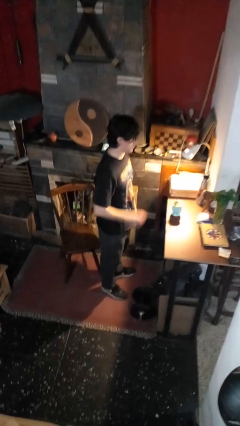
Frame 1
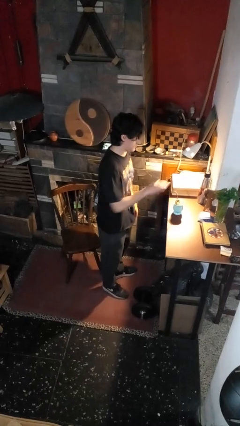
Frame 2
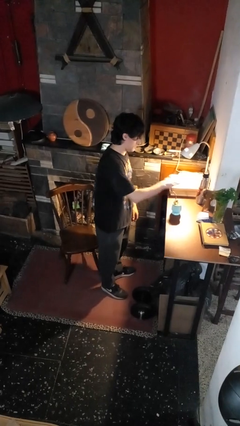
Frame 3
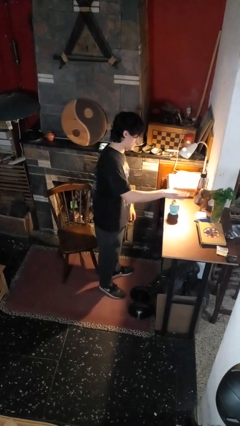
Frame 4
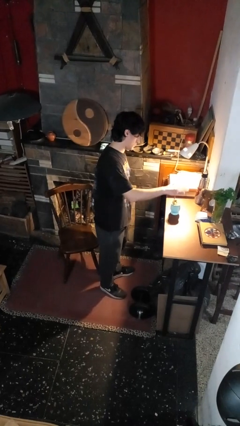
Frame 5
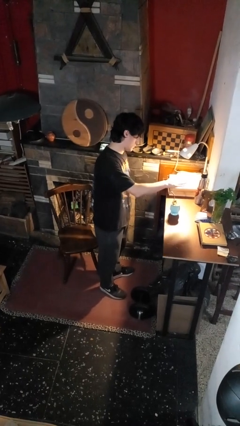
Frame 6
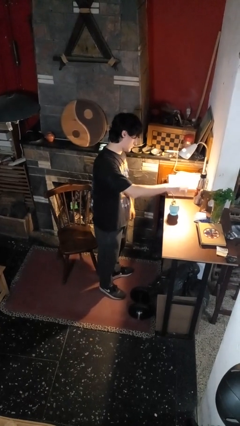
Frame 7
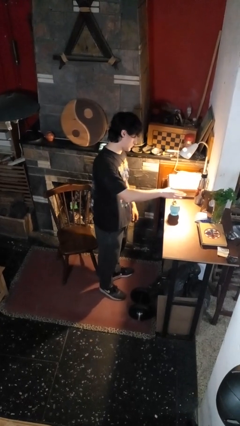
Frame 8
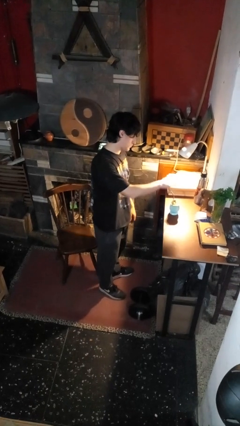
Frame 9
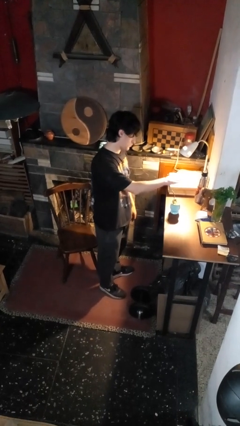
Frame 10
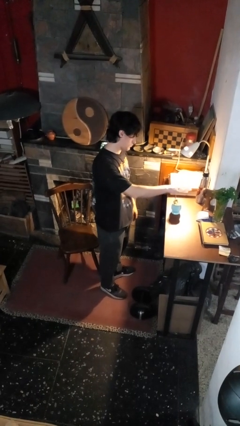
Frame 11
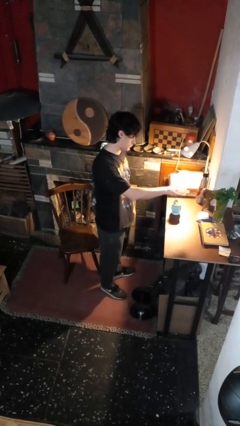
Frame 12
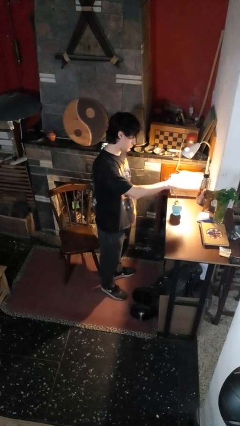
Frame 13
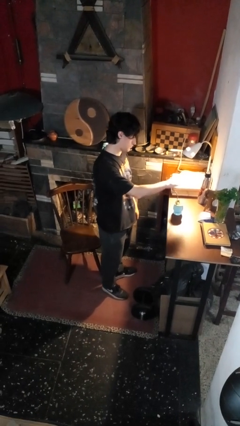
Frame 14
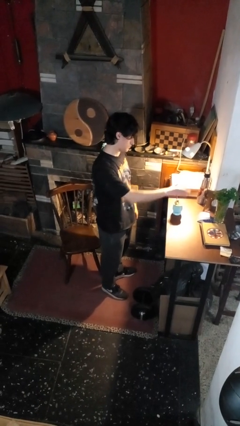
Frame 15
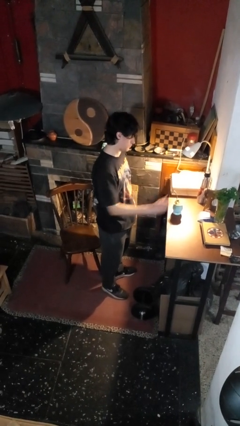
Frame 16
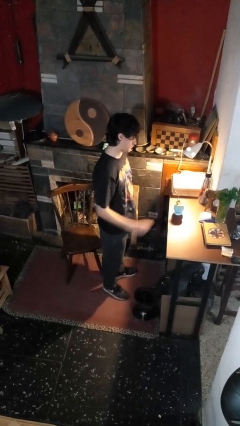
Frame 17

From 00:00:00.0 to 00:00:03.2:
person waves hand over object

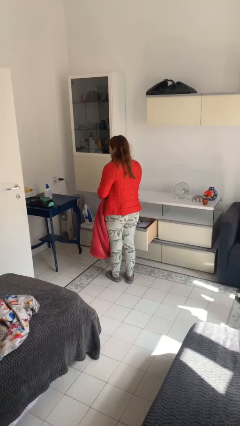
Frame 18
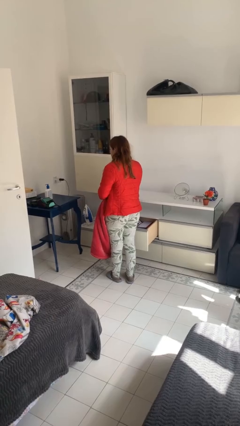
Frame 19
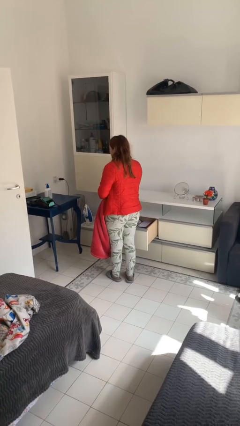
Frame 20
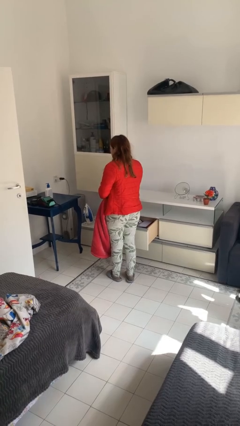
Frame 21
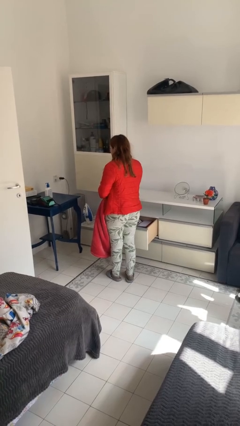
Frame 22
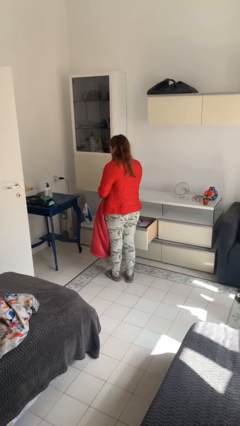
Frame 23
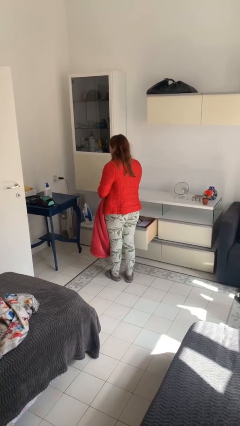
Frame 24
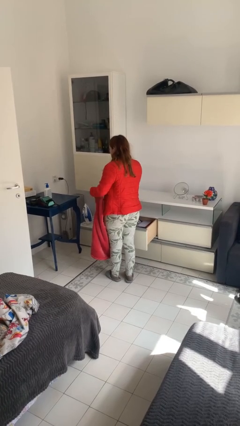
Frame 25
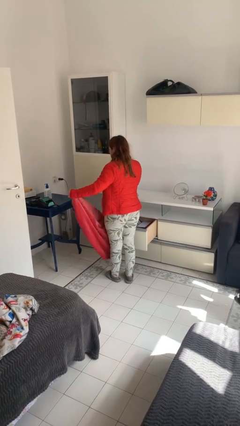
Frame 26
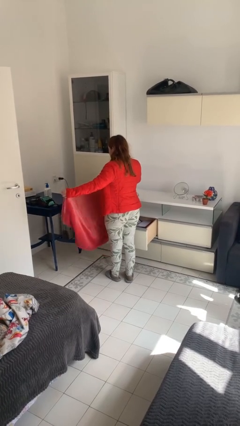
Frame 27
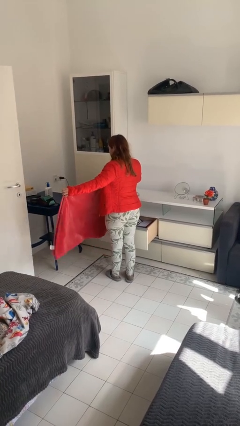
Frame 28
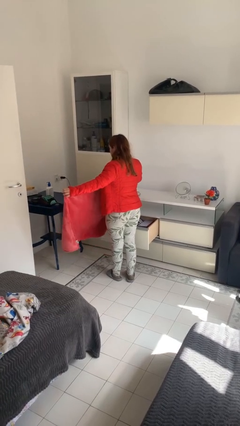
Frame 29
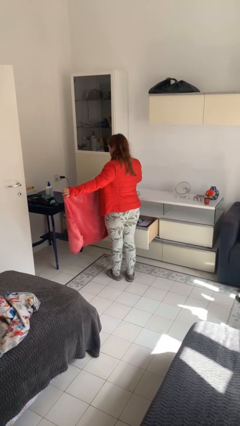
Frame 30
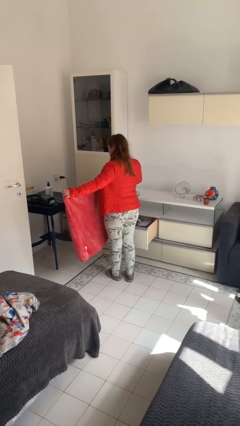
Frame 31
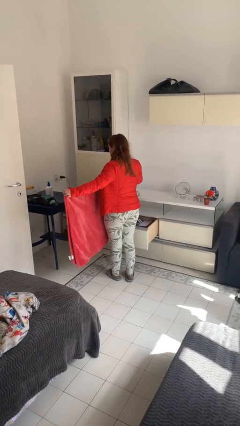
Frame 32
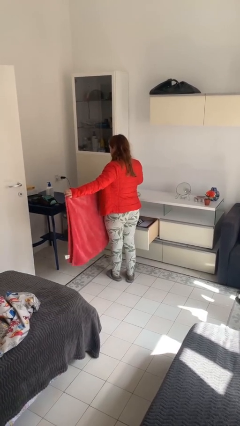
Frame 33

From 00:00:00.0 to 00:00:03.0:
person folds blanket

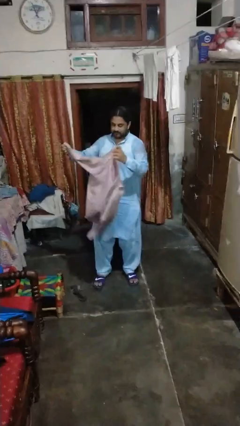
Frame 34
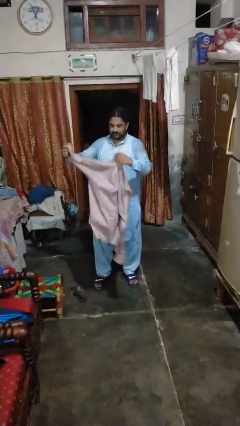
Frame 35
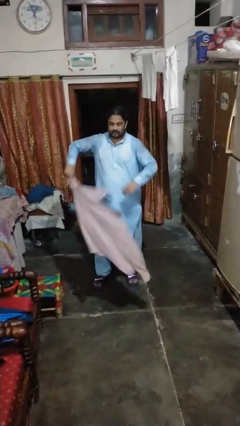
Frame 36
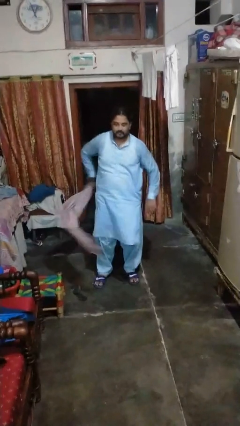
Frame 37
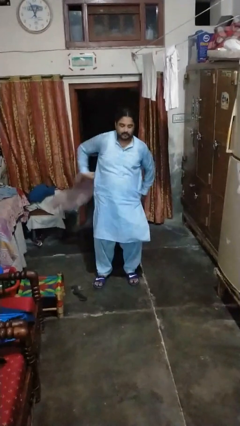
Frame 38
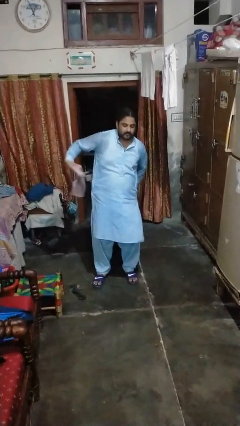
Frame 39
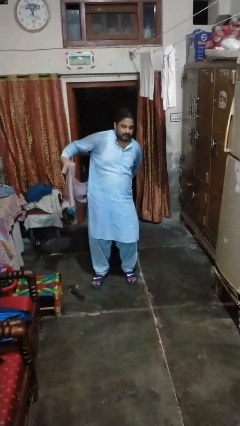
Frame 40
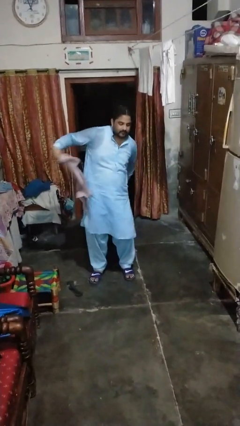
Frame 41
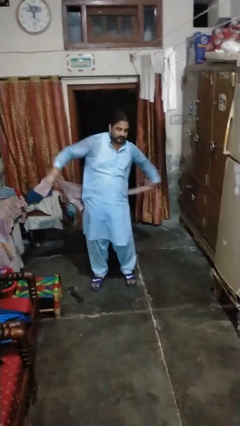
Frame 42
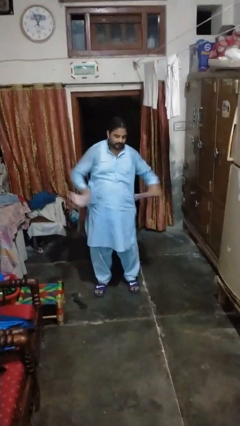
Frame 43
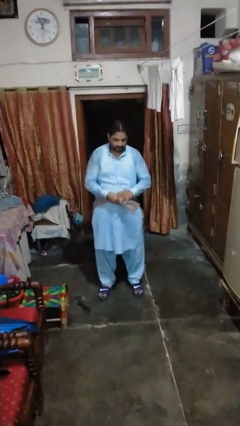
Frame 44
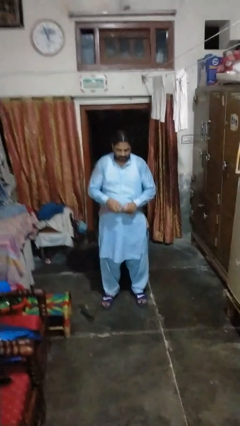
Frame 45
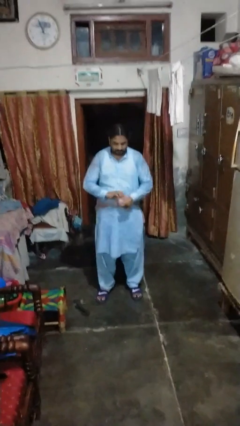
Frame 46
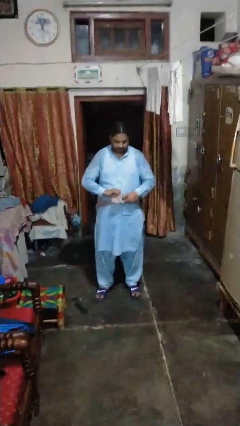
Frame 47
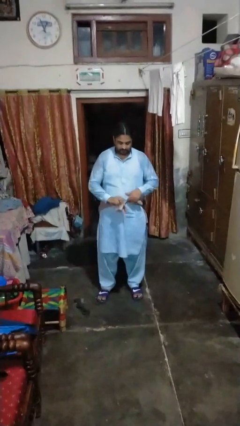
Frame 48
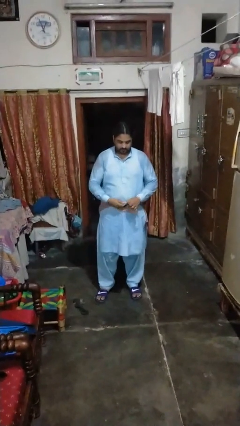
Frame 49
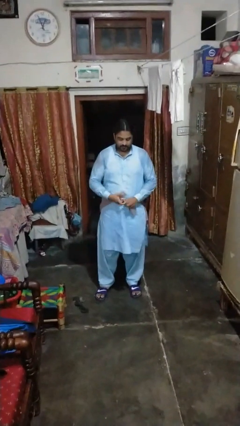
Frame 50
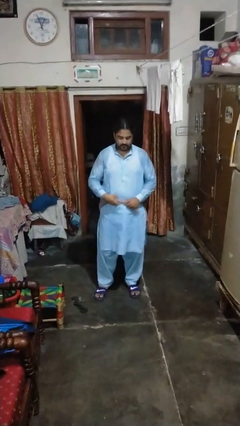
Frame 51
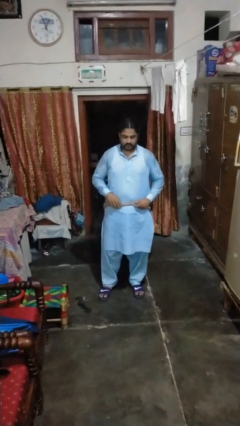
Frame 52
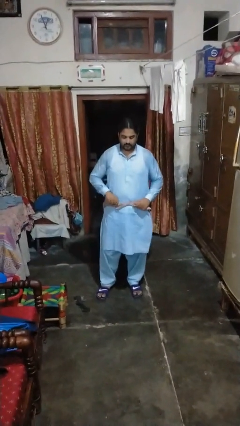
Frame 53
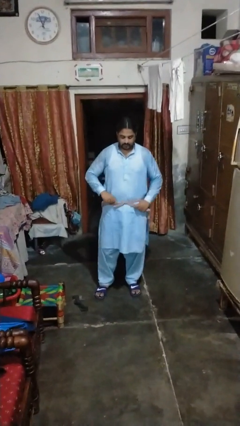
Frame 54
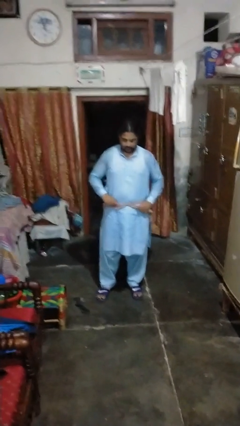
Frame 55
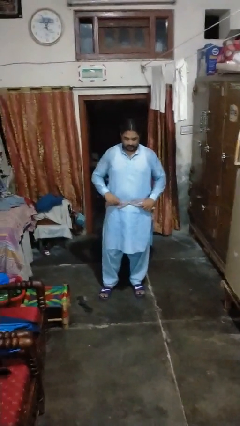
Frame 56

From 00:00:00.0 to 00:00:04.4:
person ties jacket around waist

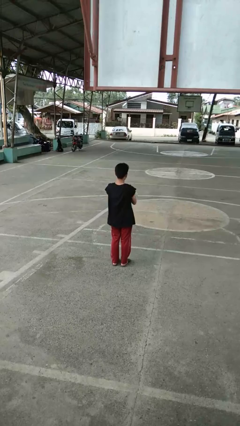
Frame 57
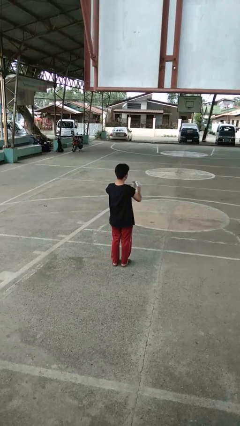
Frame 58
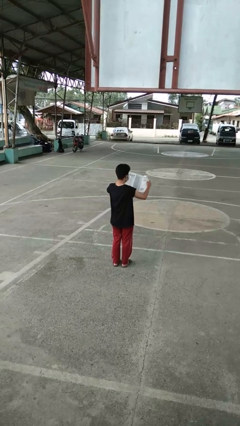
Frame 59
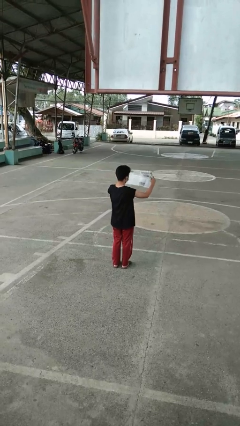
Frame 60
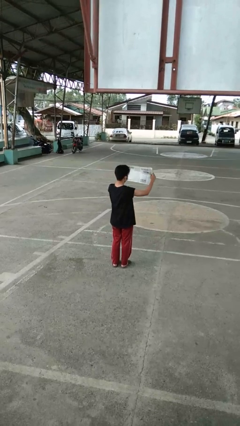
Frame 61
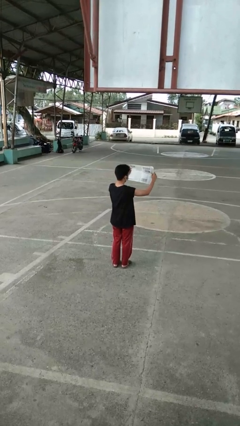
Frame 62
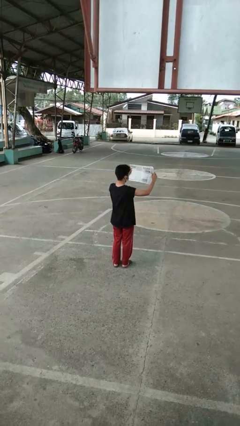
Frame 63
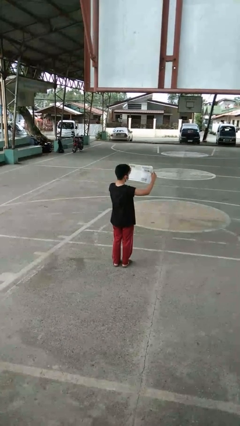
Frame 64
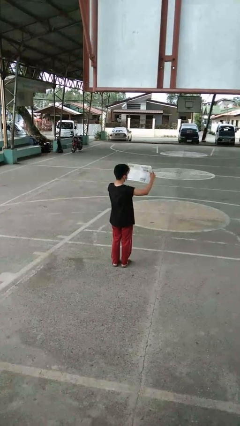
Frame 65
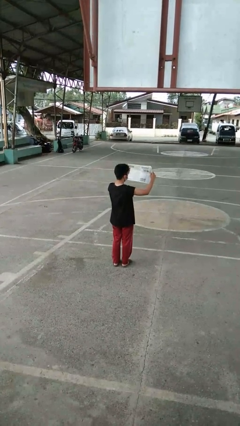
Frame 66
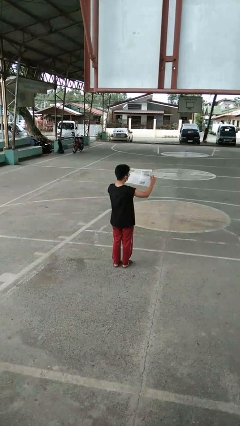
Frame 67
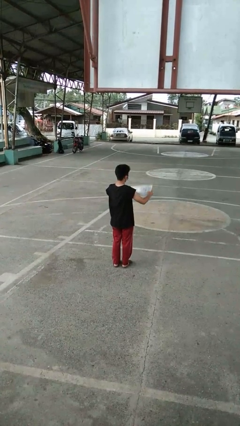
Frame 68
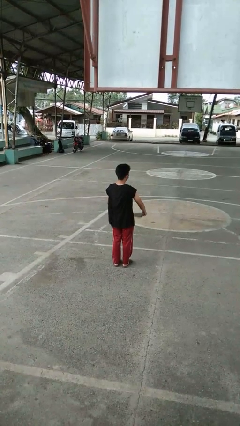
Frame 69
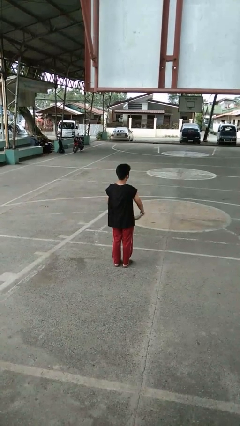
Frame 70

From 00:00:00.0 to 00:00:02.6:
person reads newspaper

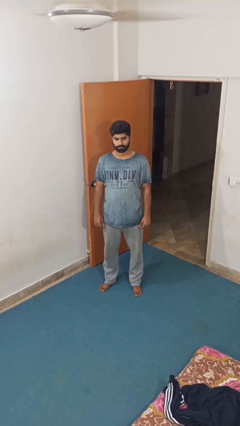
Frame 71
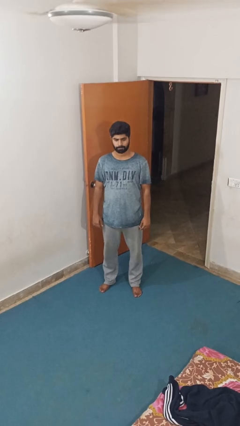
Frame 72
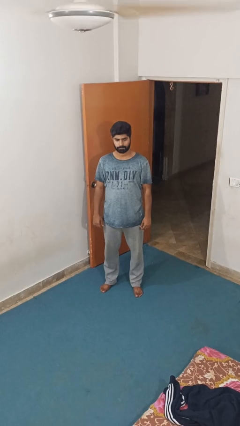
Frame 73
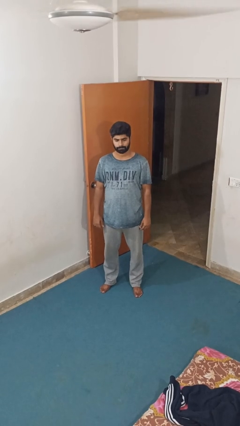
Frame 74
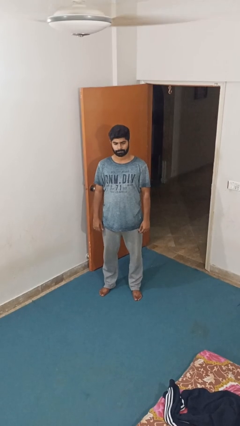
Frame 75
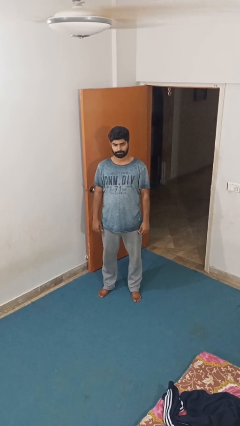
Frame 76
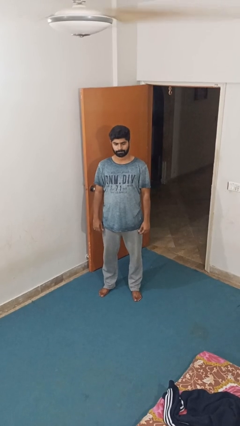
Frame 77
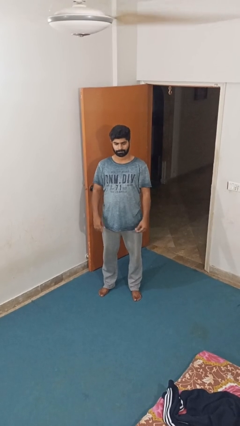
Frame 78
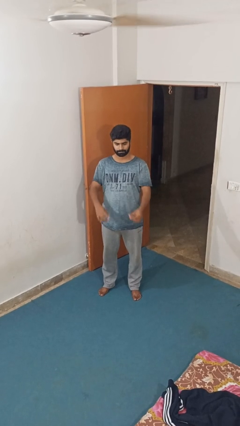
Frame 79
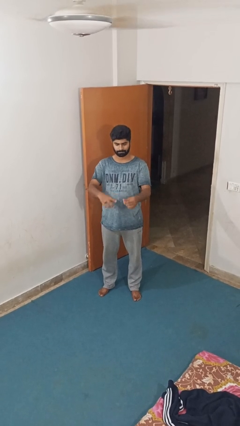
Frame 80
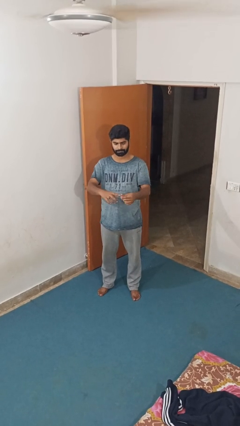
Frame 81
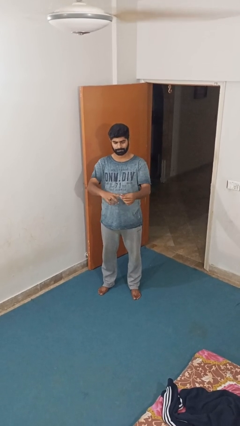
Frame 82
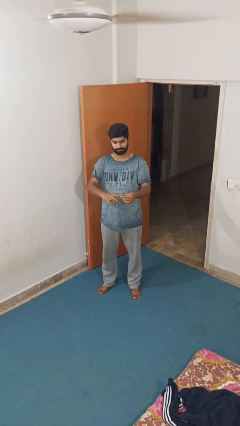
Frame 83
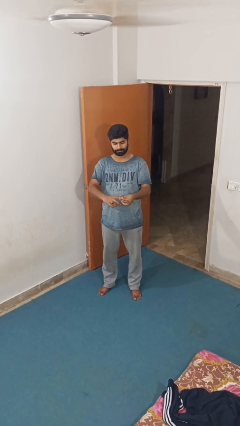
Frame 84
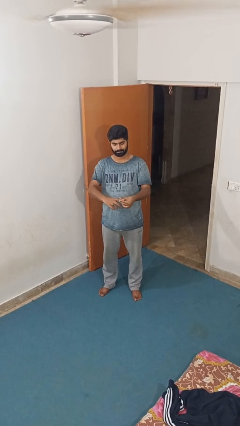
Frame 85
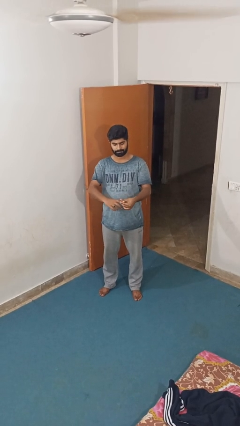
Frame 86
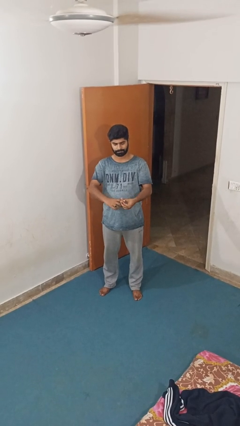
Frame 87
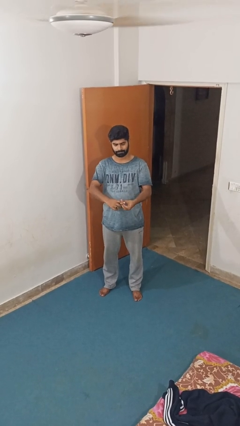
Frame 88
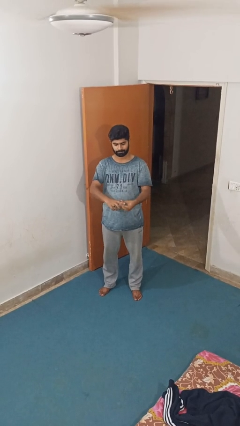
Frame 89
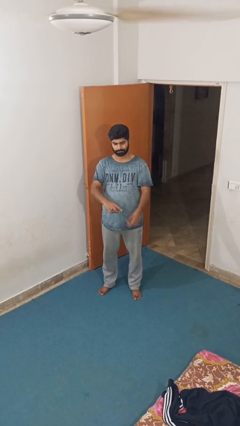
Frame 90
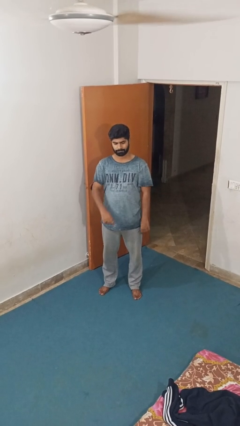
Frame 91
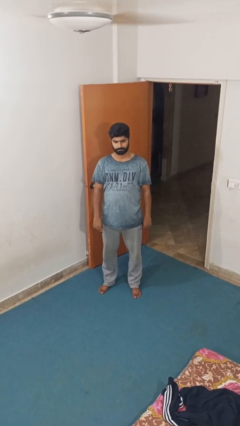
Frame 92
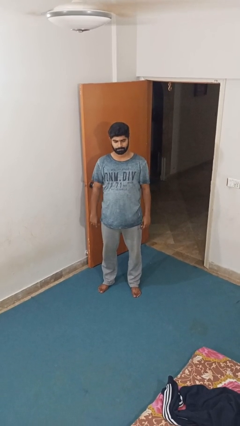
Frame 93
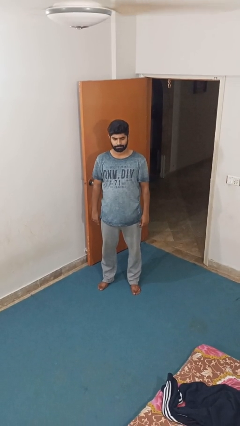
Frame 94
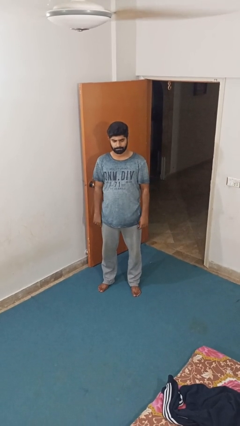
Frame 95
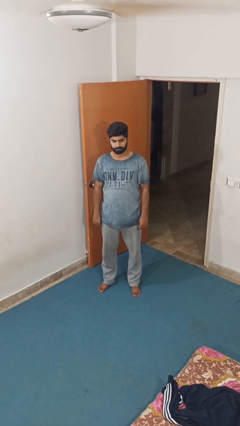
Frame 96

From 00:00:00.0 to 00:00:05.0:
person puts on ring
